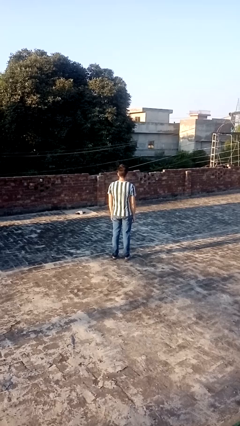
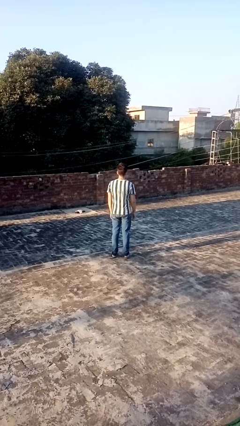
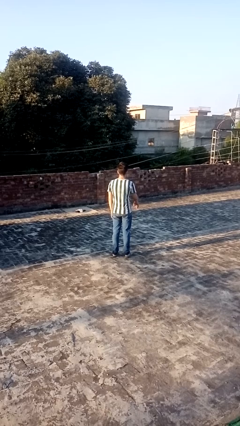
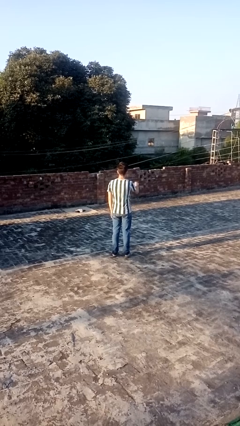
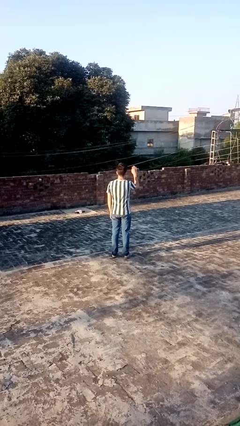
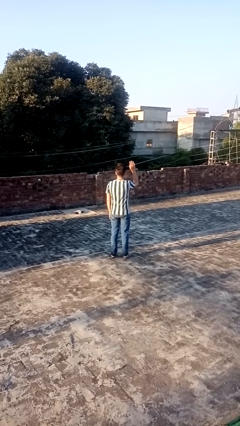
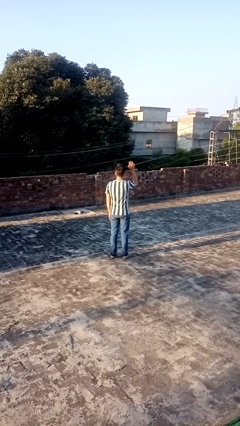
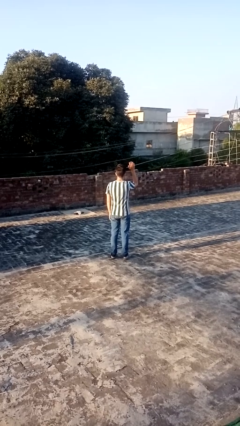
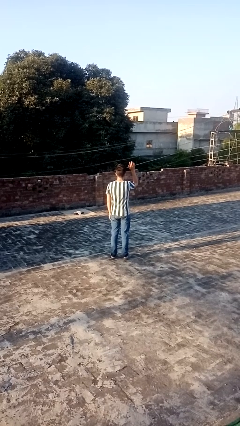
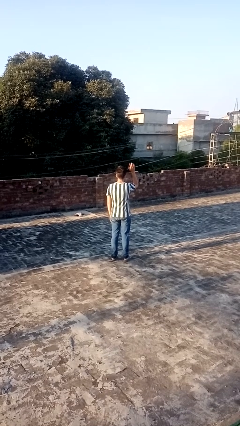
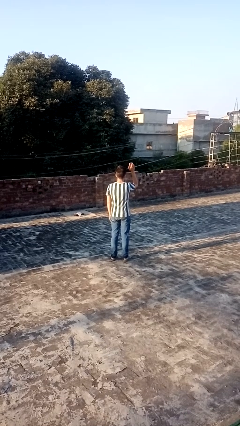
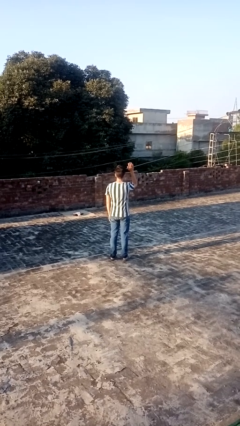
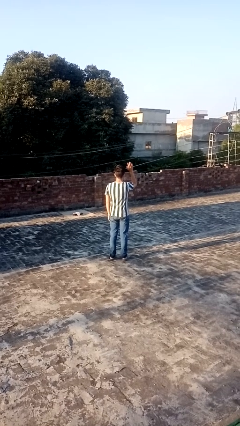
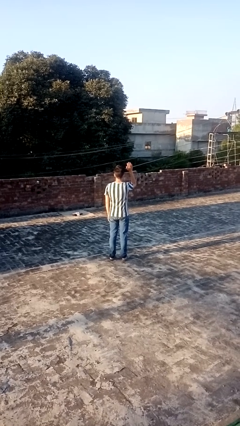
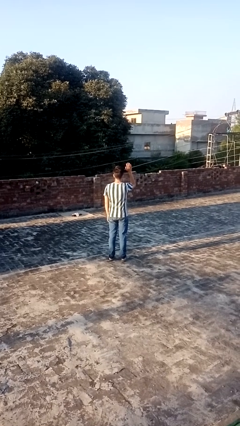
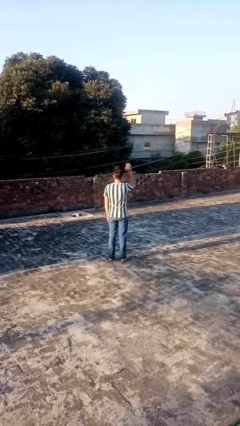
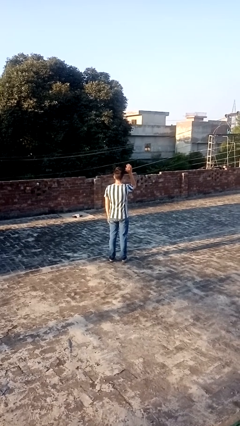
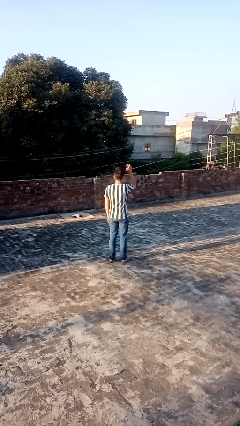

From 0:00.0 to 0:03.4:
person gestures raise hand

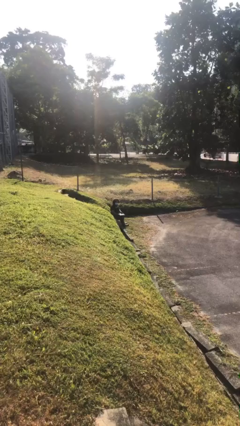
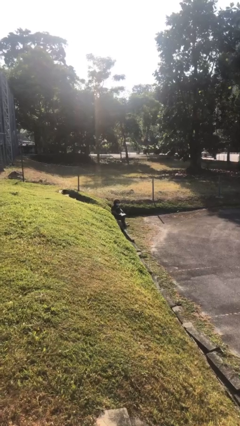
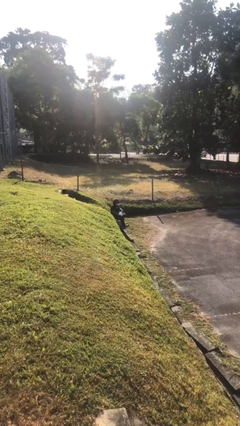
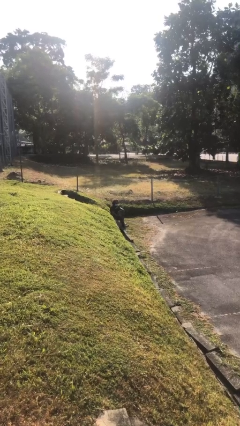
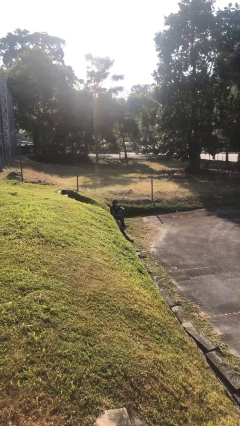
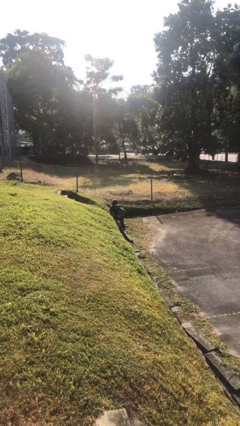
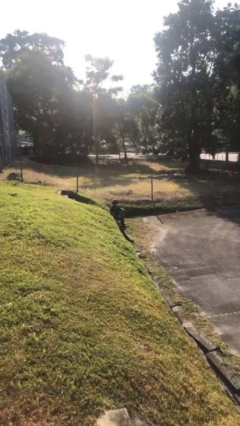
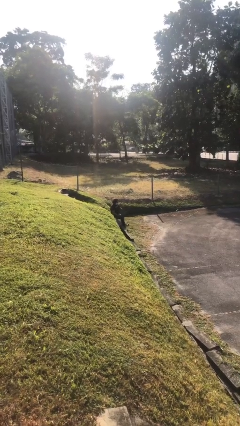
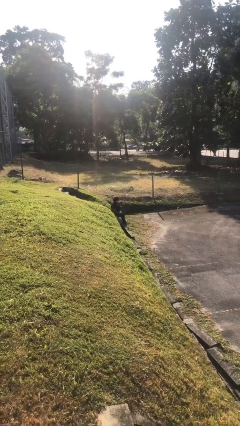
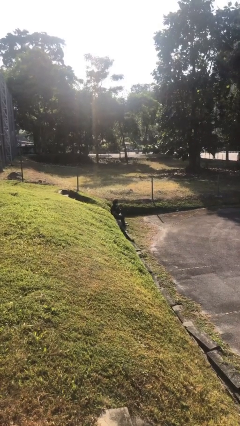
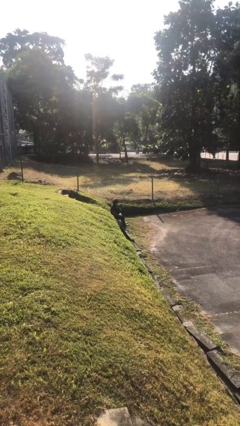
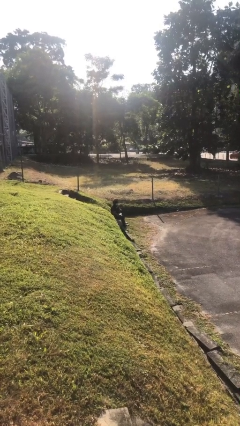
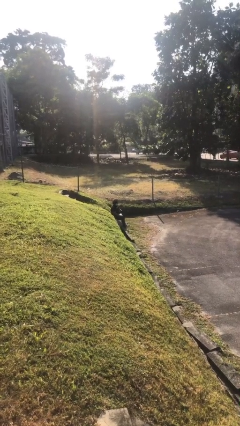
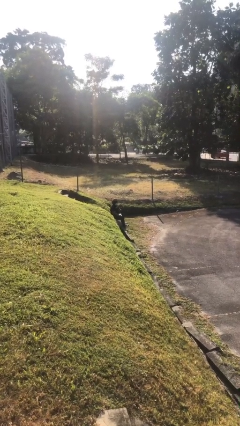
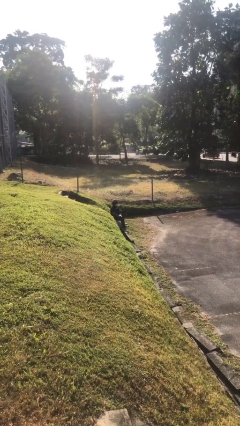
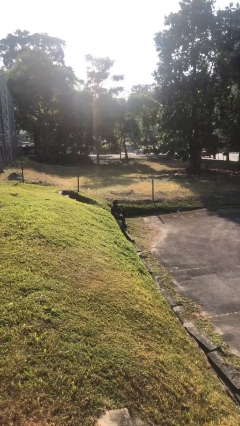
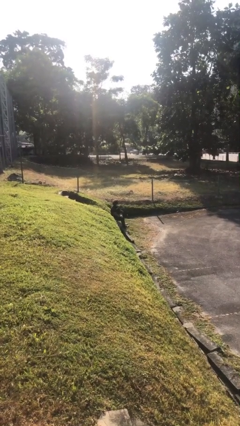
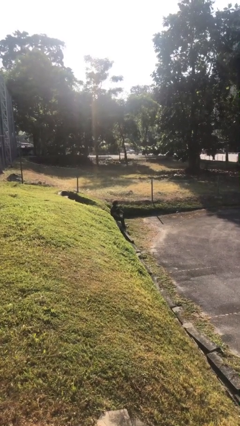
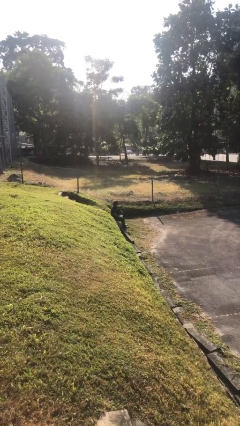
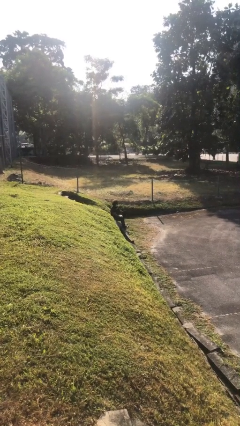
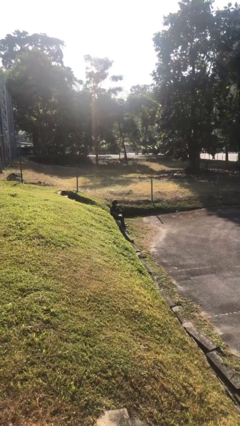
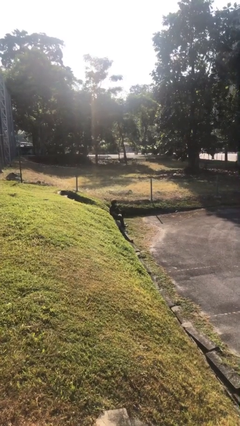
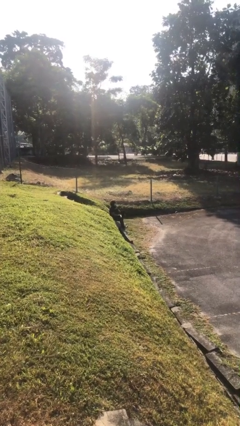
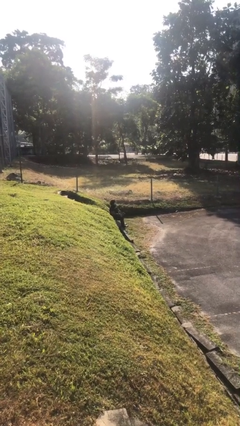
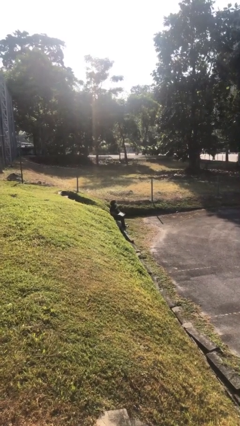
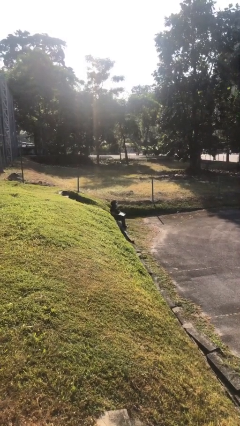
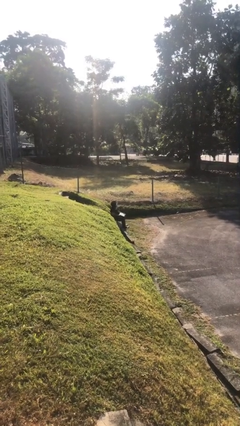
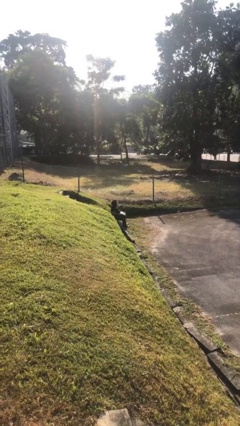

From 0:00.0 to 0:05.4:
person interacts with laptop

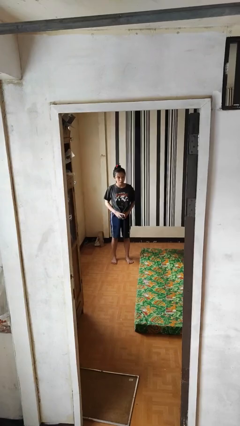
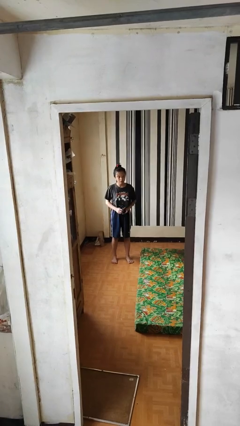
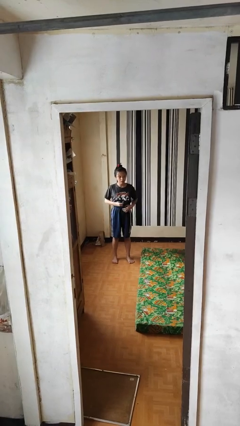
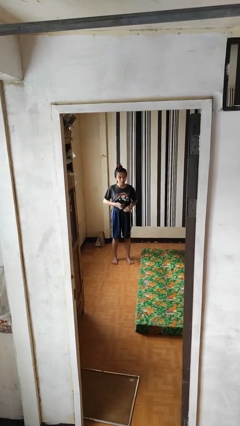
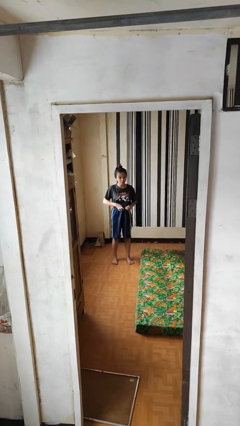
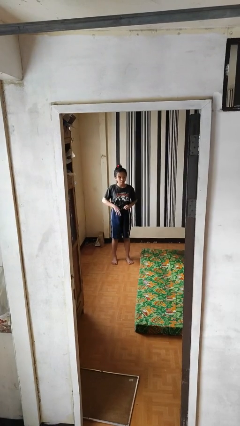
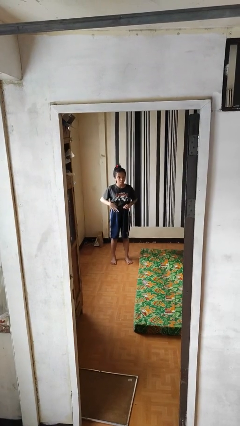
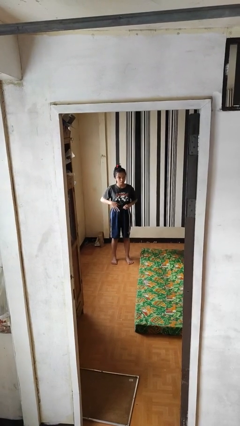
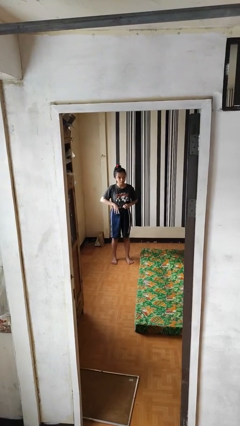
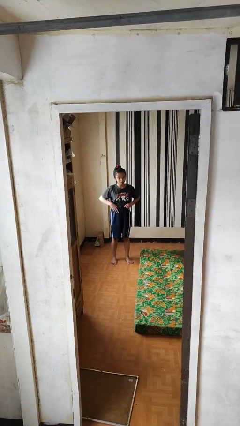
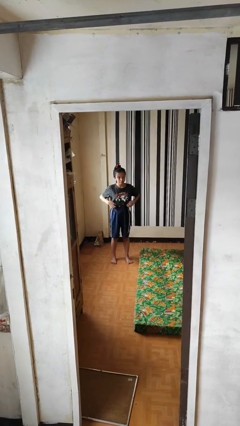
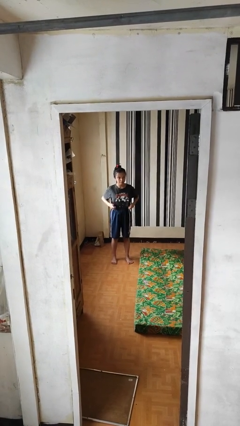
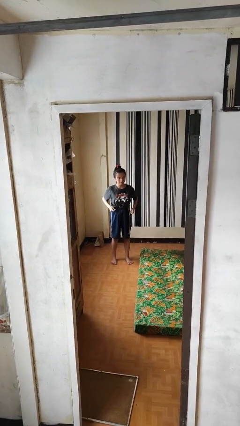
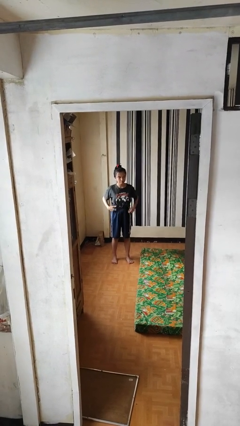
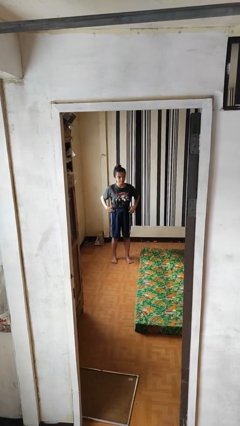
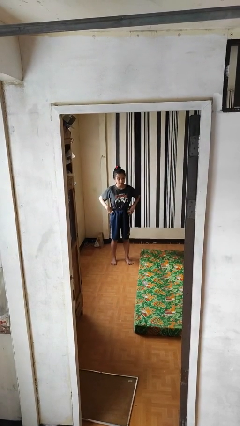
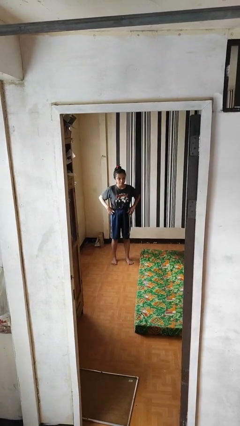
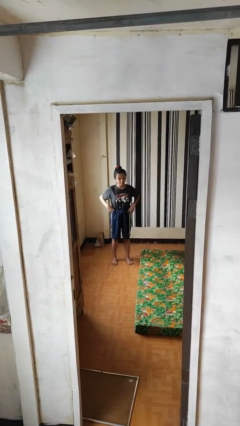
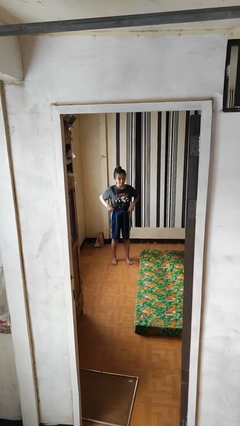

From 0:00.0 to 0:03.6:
person tucks in shirt

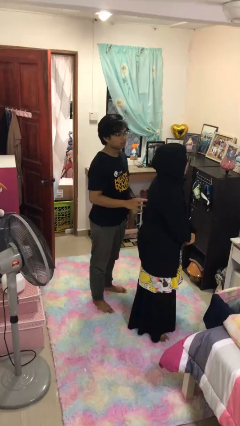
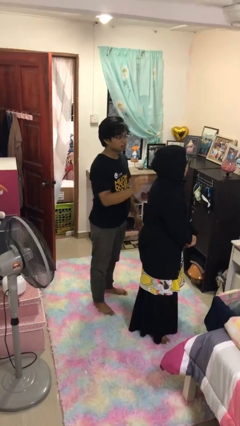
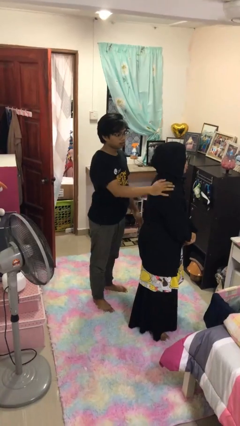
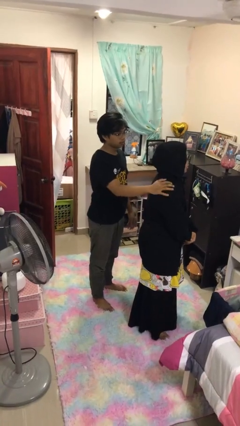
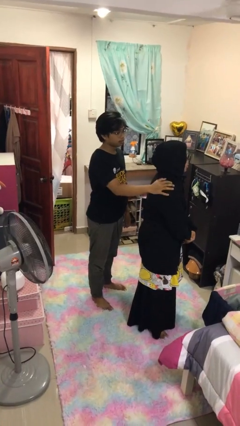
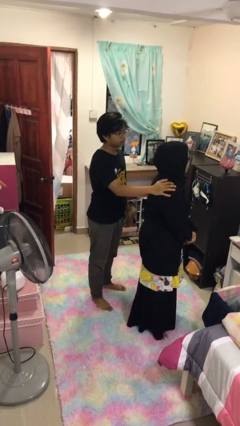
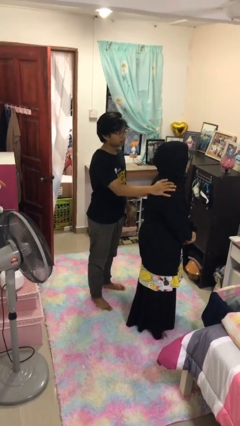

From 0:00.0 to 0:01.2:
person grabs person by shoulder

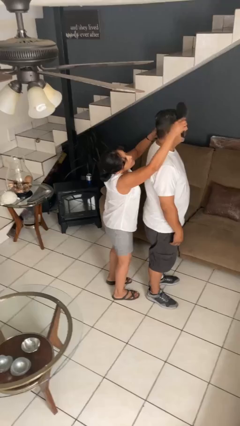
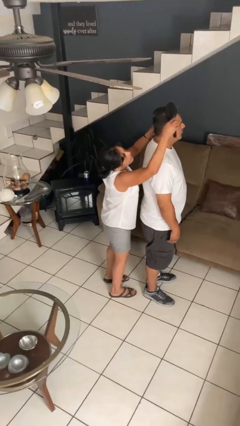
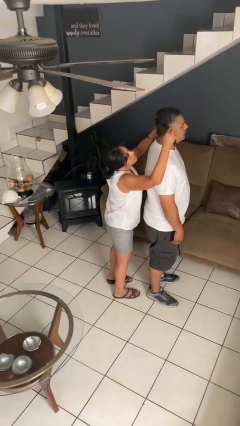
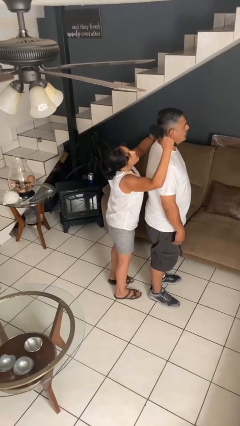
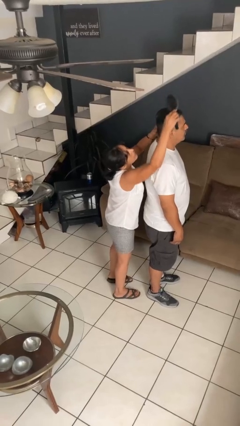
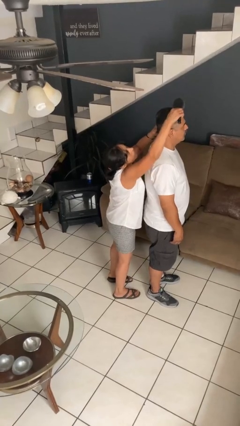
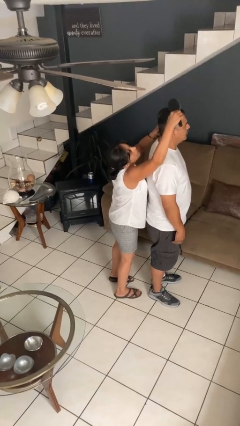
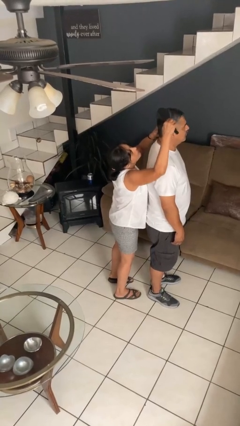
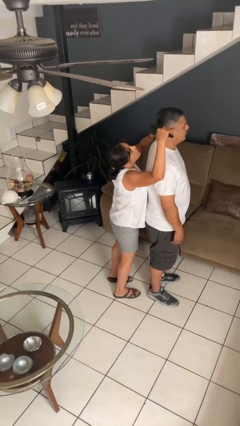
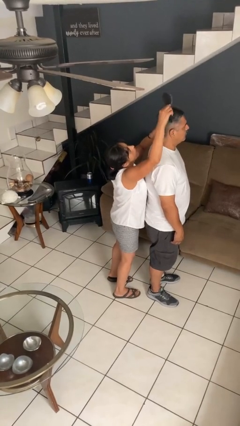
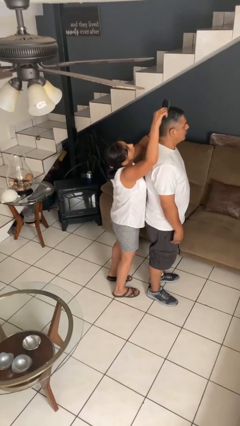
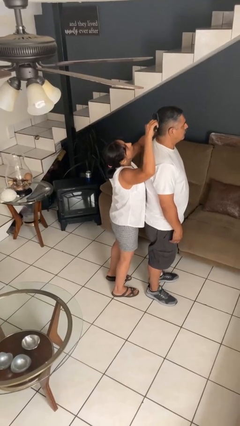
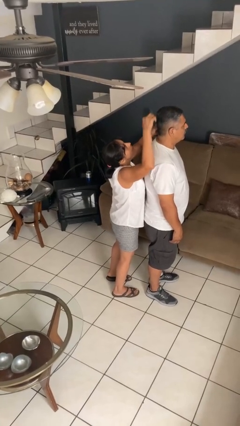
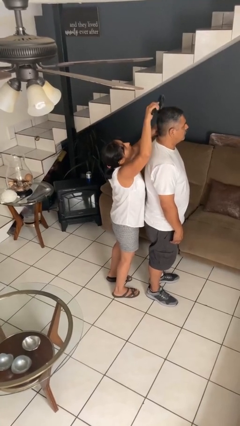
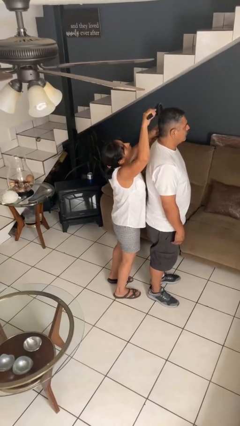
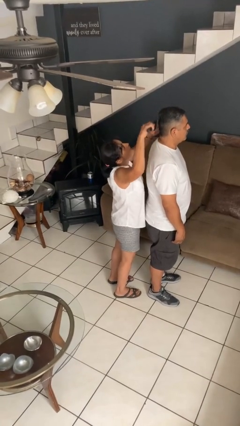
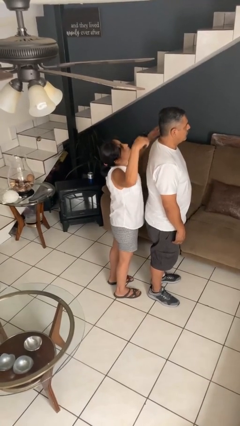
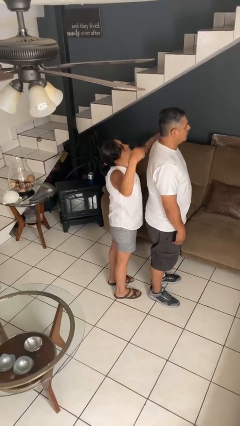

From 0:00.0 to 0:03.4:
person brushes hair of person

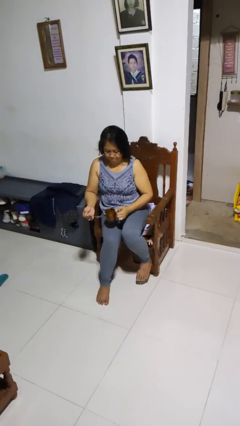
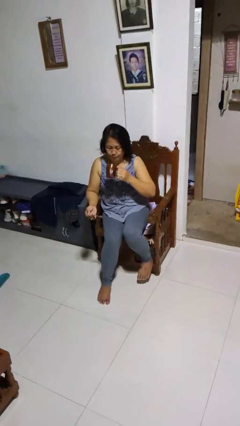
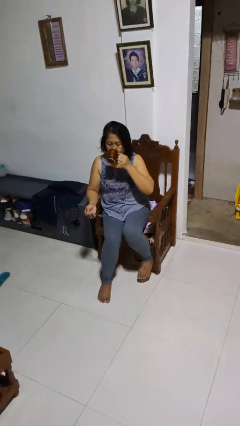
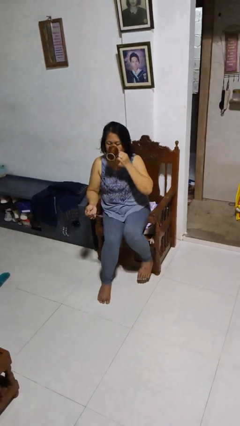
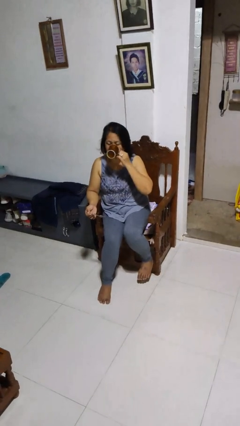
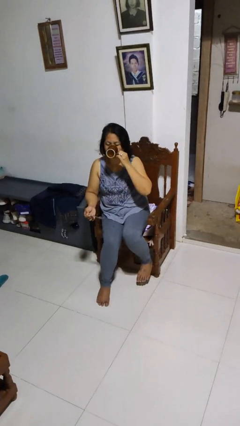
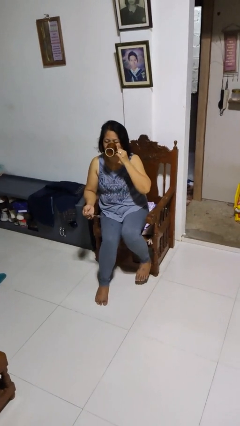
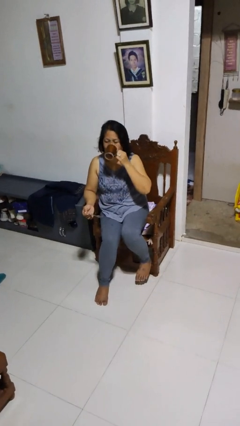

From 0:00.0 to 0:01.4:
person drinks from mug
